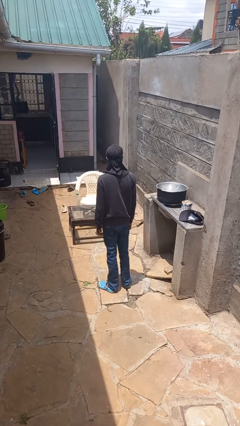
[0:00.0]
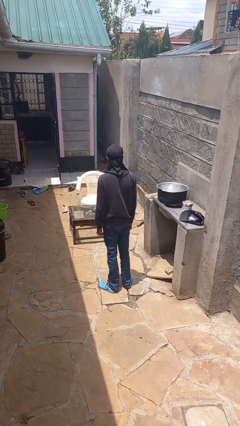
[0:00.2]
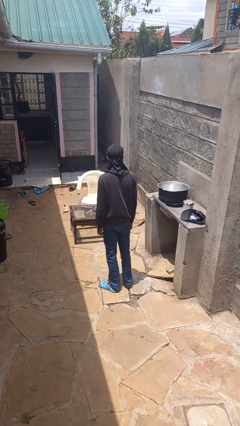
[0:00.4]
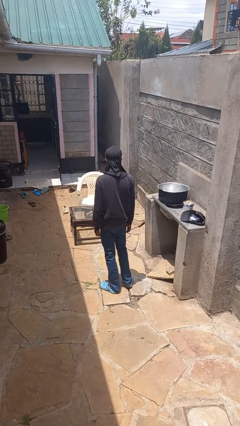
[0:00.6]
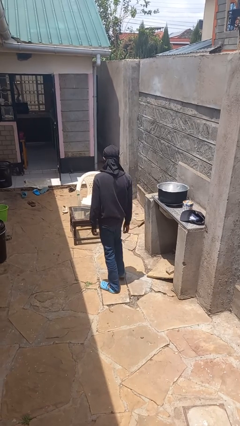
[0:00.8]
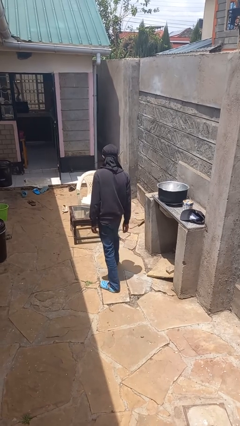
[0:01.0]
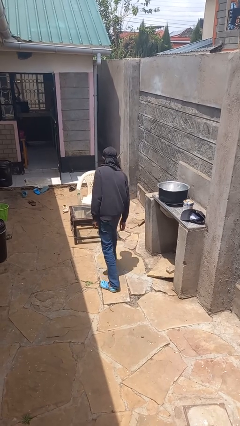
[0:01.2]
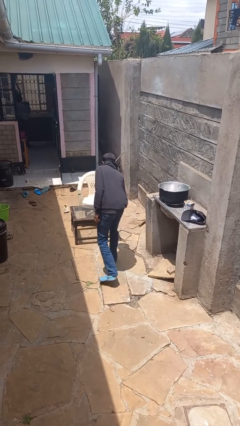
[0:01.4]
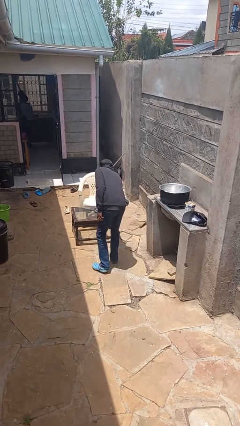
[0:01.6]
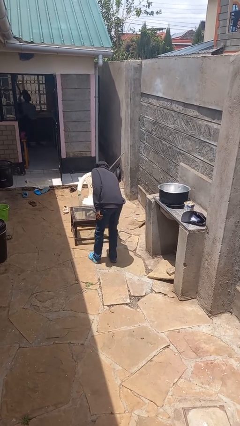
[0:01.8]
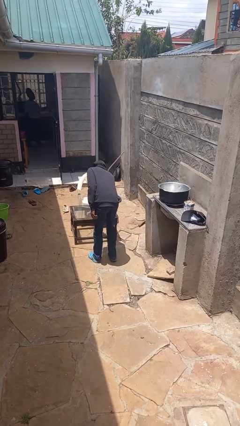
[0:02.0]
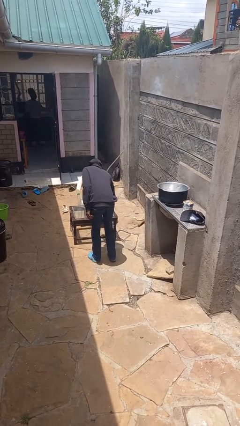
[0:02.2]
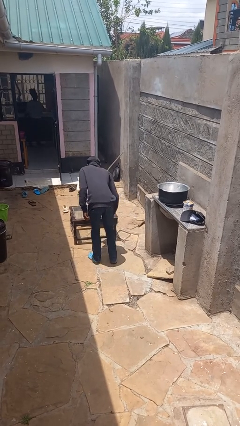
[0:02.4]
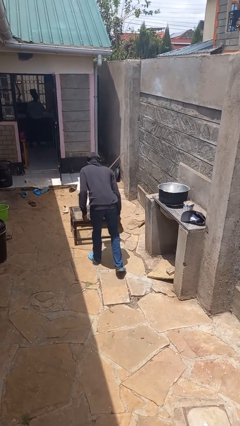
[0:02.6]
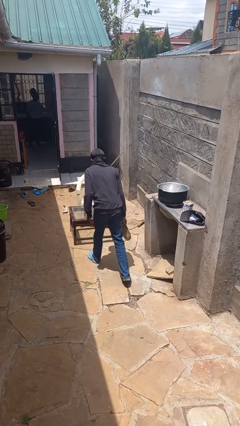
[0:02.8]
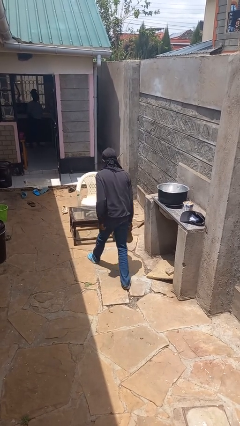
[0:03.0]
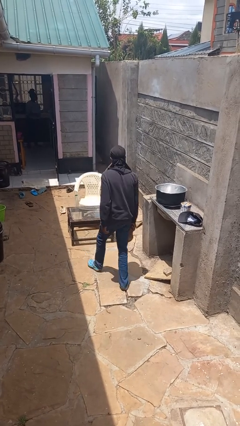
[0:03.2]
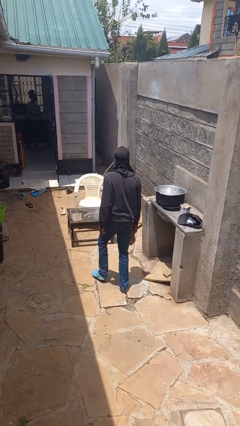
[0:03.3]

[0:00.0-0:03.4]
person picks up object from table

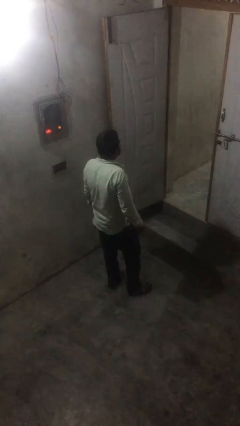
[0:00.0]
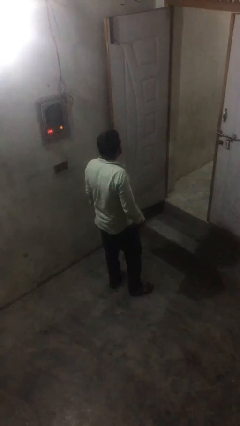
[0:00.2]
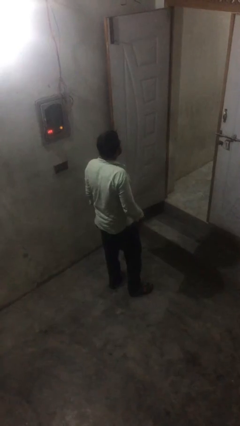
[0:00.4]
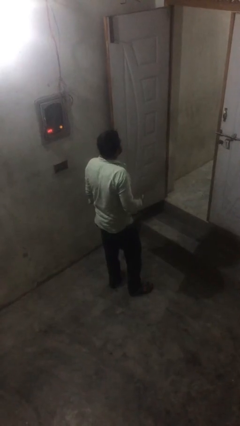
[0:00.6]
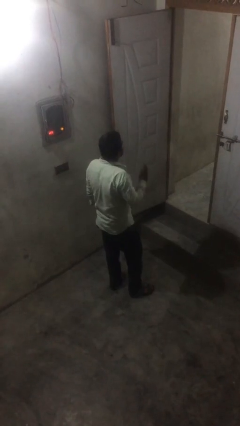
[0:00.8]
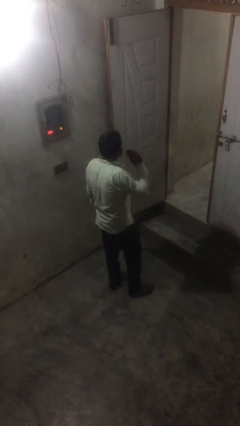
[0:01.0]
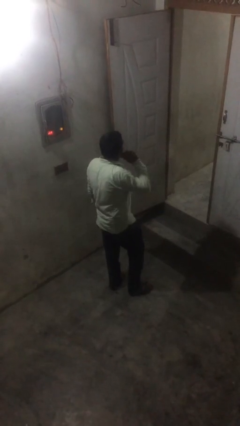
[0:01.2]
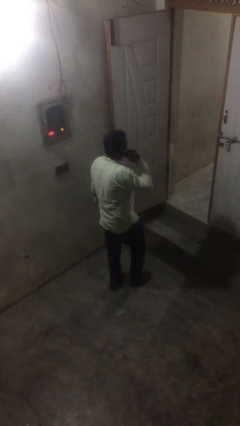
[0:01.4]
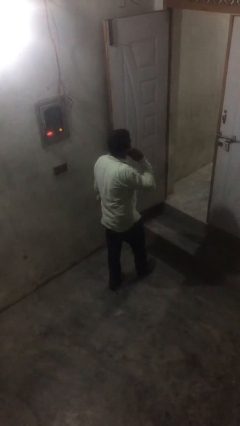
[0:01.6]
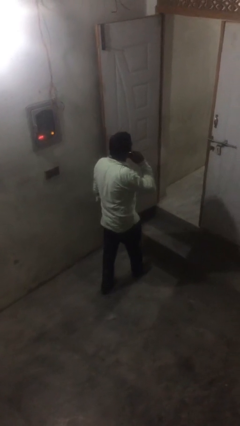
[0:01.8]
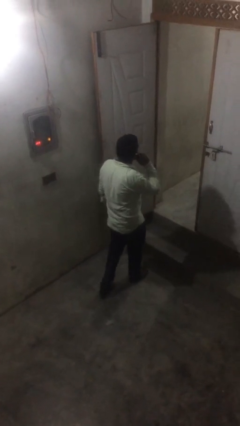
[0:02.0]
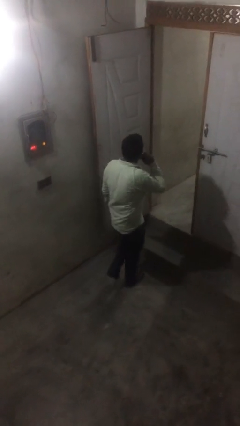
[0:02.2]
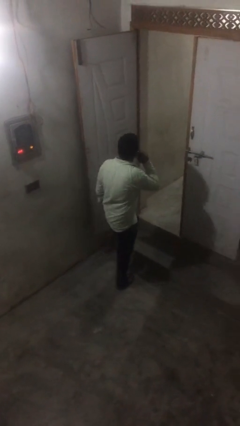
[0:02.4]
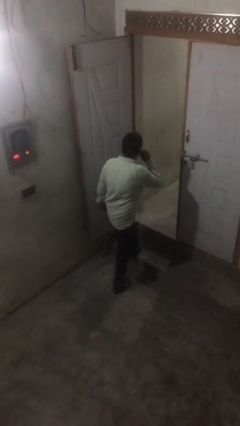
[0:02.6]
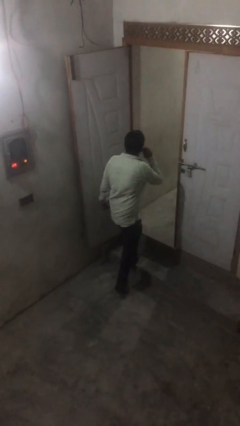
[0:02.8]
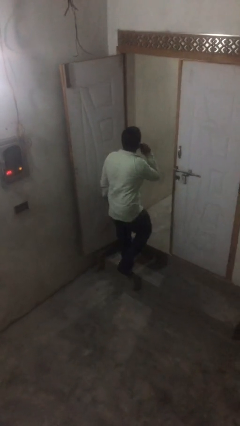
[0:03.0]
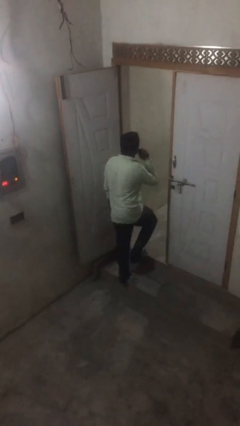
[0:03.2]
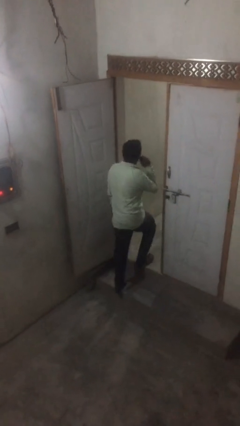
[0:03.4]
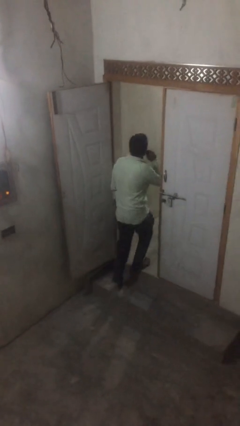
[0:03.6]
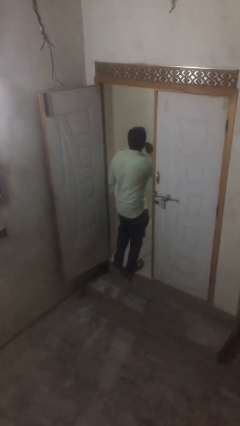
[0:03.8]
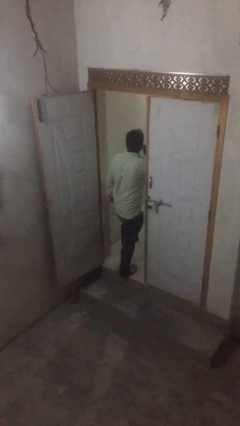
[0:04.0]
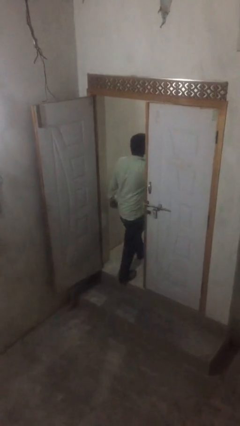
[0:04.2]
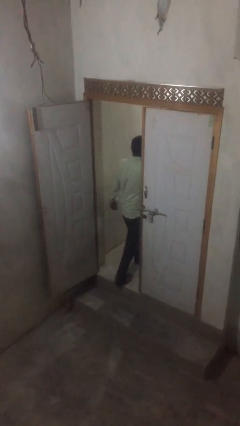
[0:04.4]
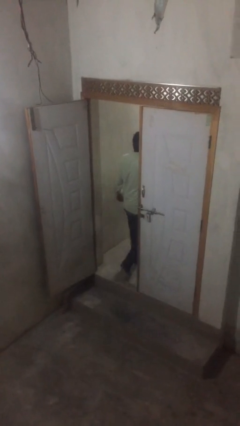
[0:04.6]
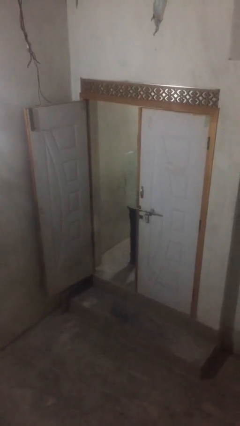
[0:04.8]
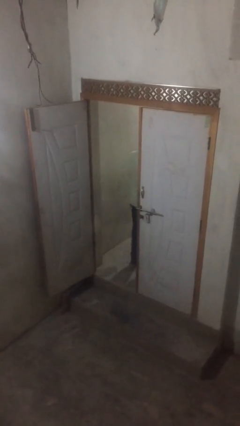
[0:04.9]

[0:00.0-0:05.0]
person exits scene through structure

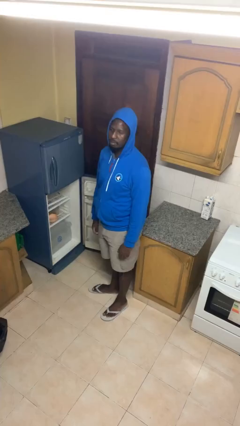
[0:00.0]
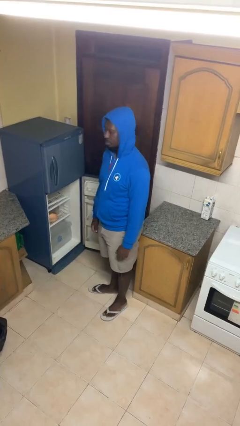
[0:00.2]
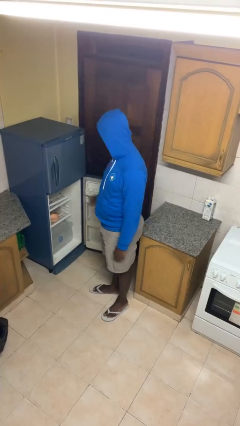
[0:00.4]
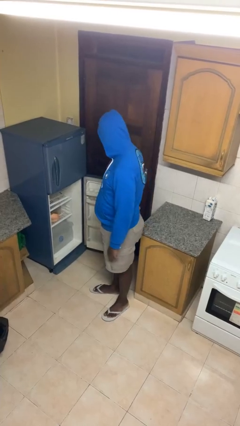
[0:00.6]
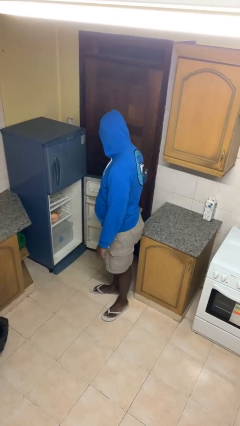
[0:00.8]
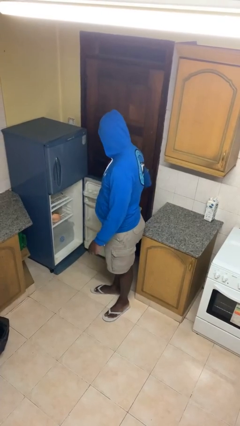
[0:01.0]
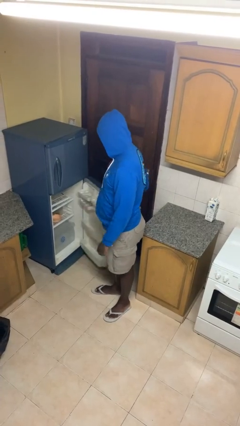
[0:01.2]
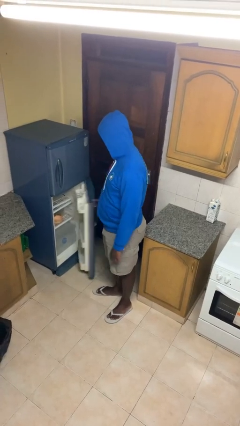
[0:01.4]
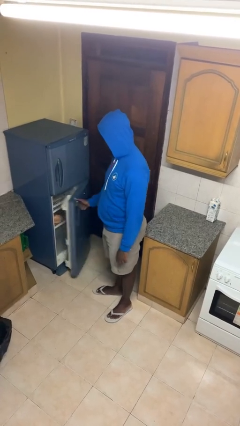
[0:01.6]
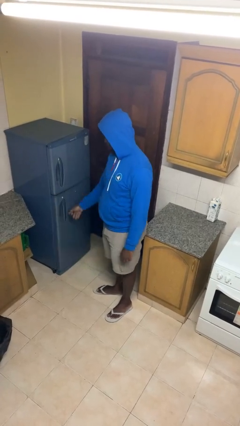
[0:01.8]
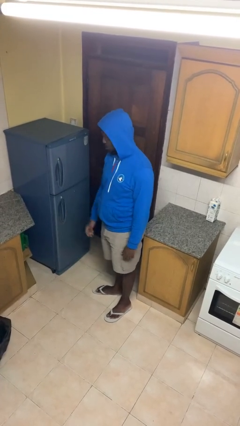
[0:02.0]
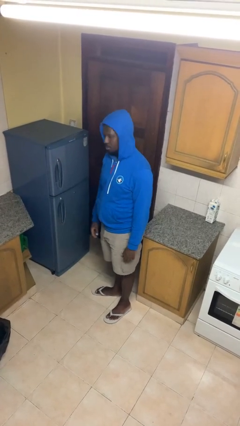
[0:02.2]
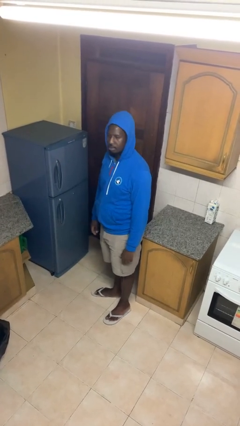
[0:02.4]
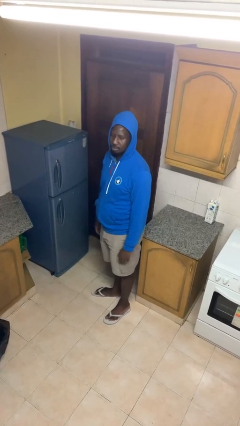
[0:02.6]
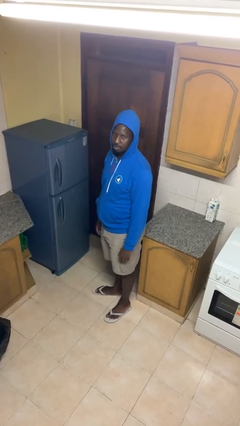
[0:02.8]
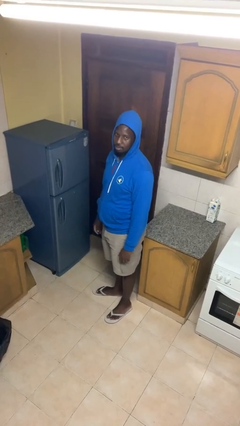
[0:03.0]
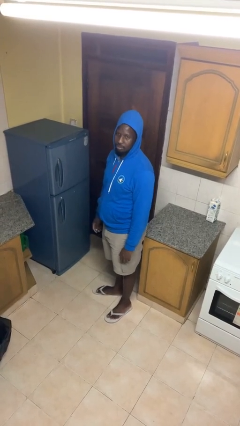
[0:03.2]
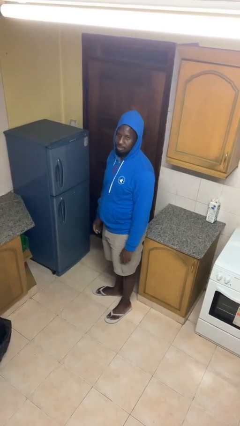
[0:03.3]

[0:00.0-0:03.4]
person closes refrigerator

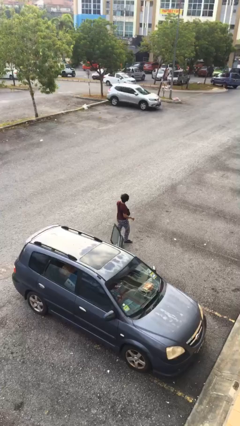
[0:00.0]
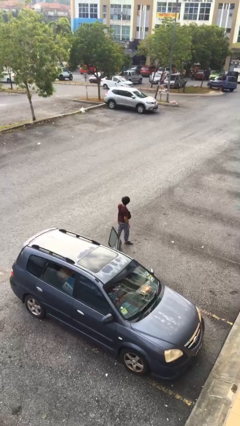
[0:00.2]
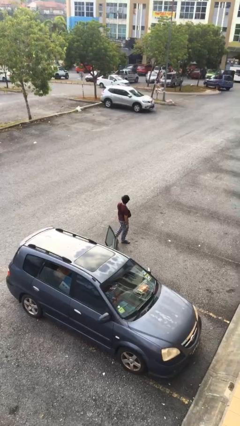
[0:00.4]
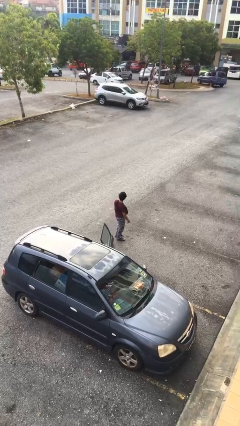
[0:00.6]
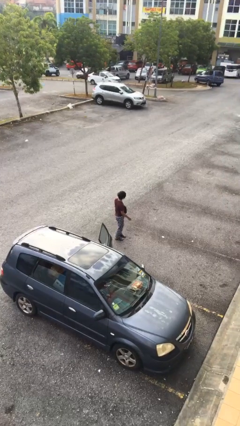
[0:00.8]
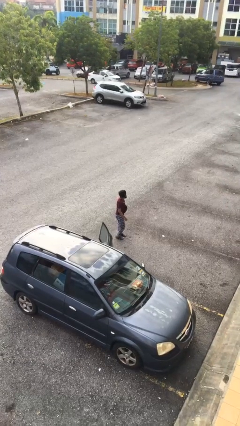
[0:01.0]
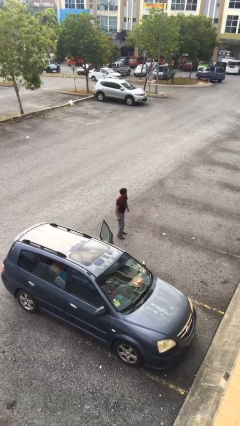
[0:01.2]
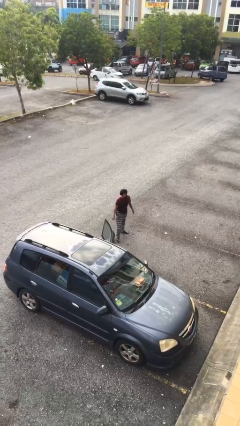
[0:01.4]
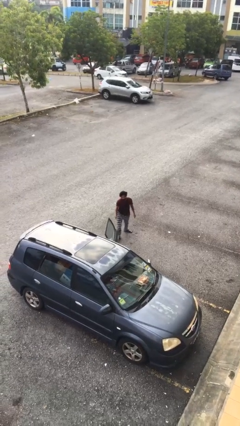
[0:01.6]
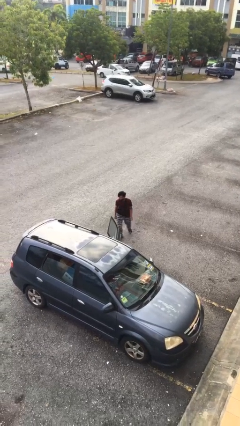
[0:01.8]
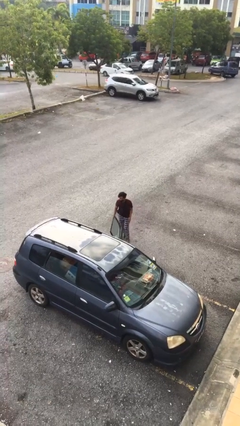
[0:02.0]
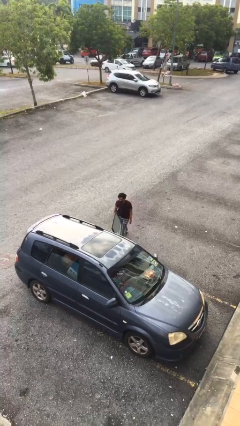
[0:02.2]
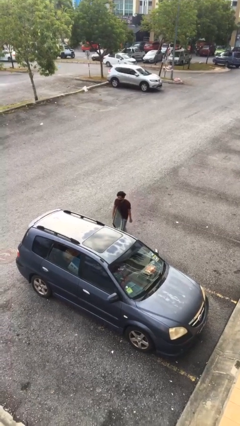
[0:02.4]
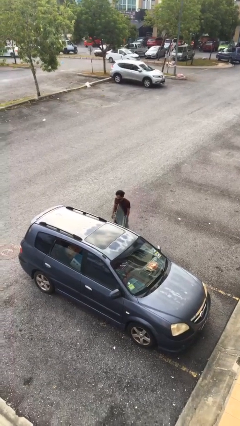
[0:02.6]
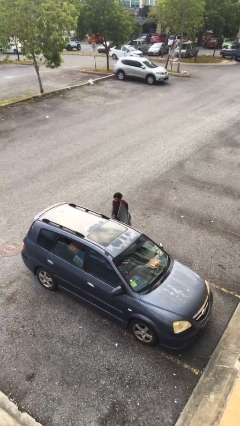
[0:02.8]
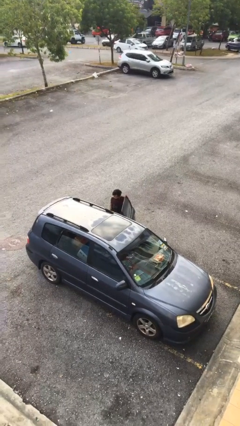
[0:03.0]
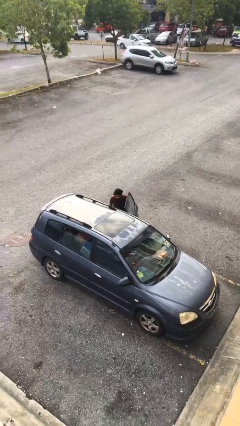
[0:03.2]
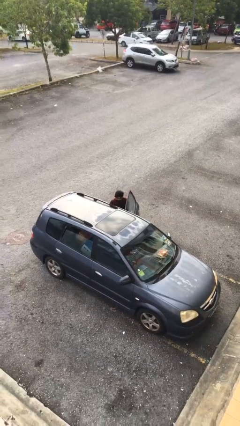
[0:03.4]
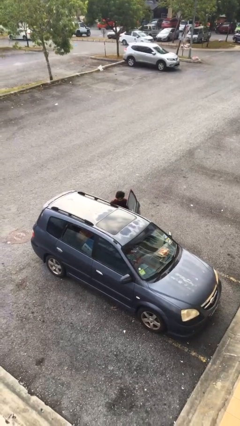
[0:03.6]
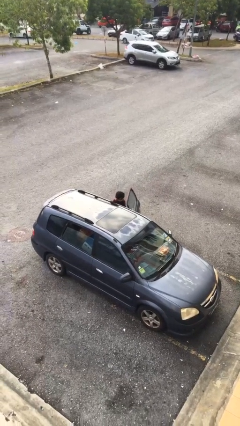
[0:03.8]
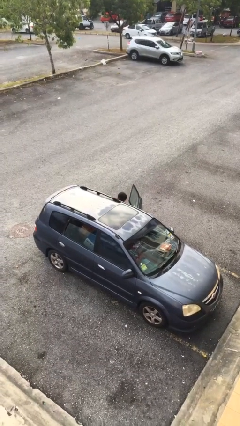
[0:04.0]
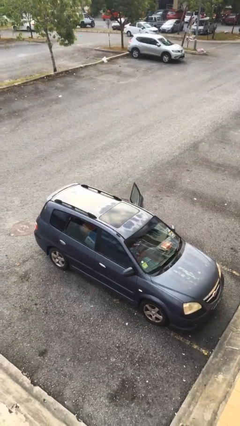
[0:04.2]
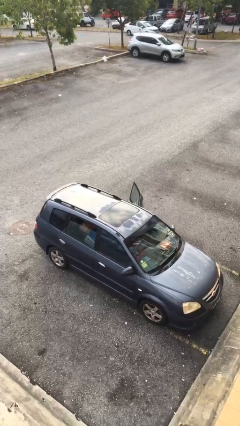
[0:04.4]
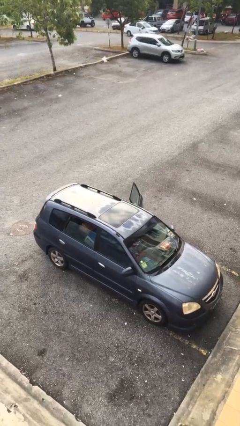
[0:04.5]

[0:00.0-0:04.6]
person enters car

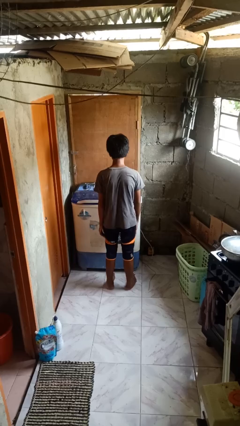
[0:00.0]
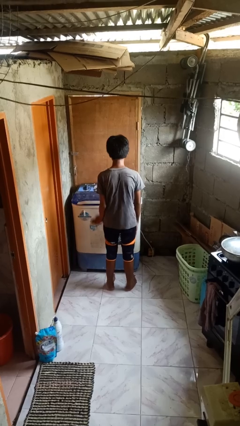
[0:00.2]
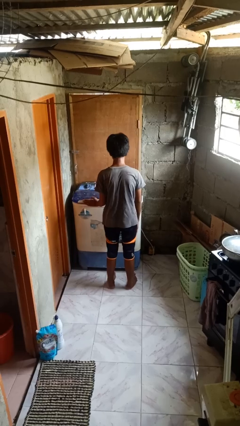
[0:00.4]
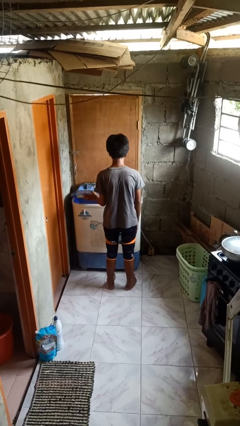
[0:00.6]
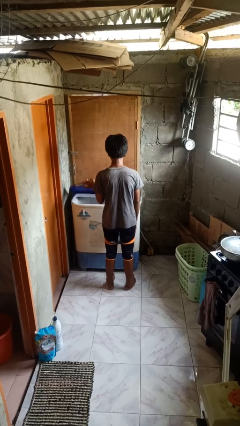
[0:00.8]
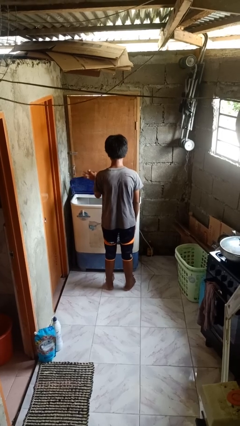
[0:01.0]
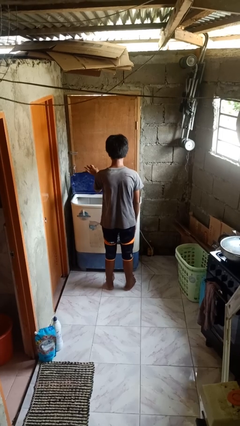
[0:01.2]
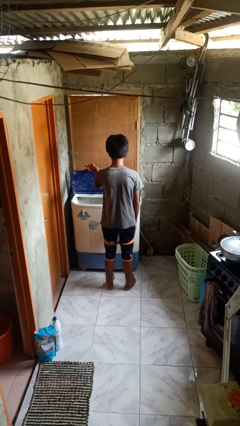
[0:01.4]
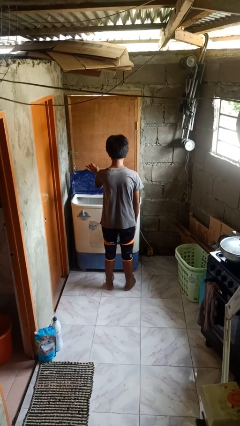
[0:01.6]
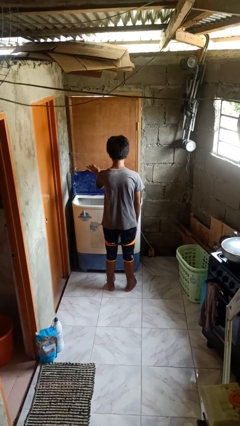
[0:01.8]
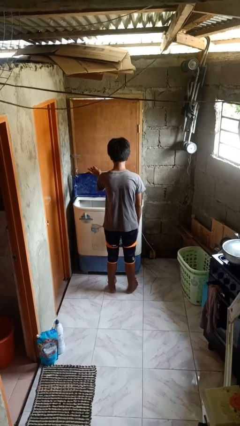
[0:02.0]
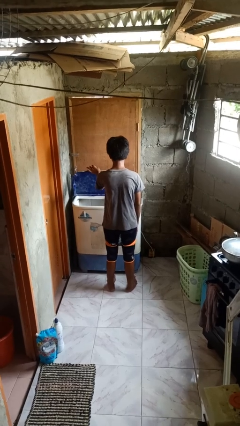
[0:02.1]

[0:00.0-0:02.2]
person opens clothes washer
